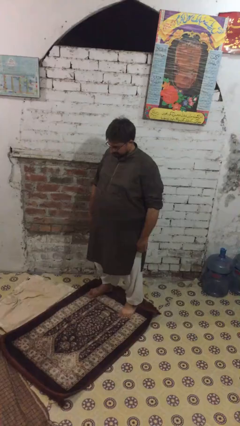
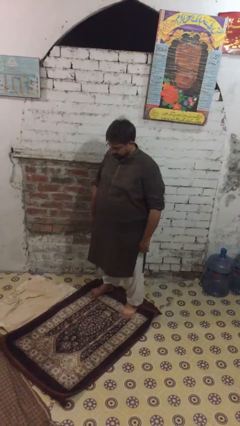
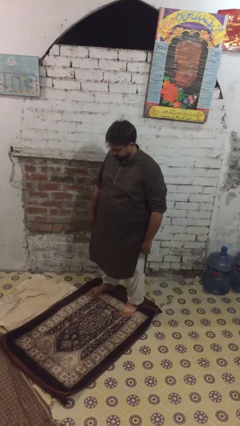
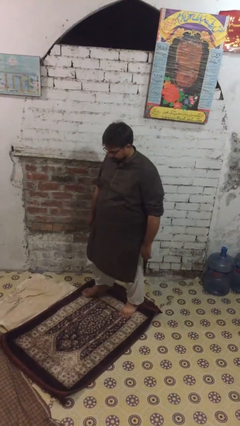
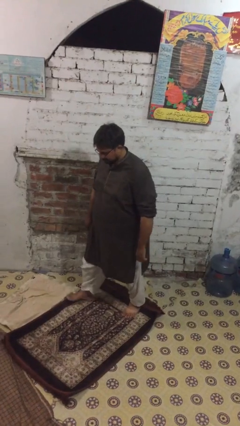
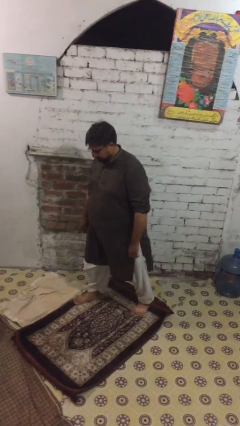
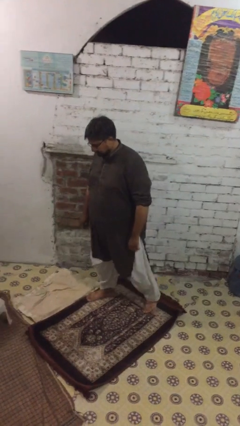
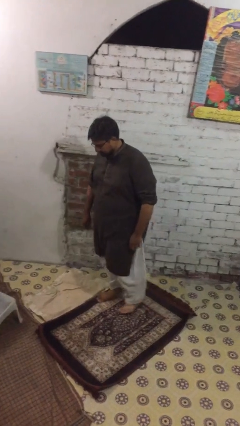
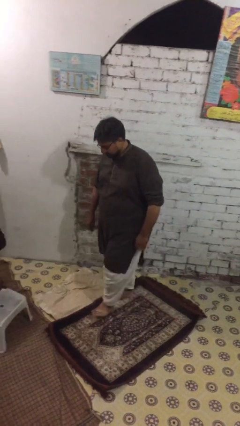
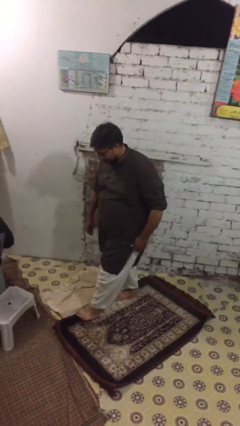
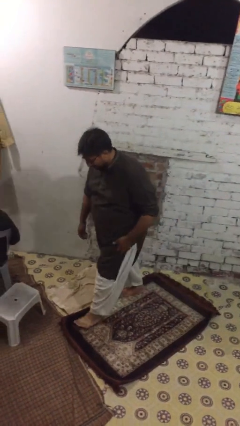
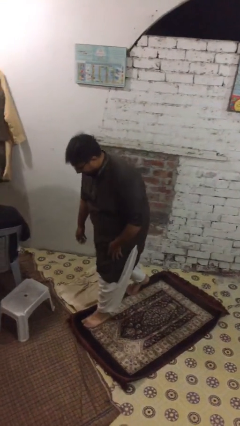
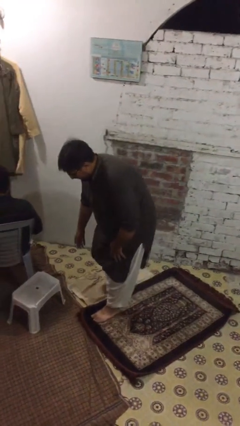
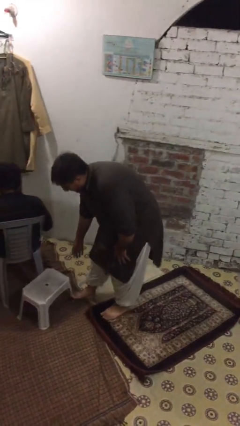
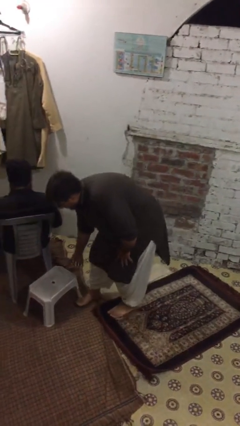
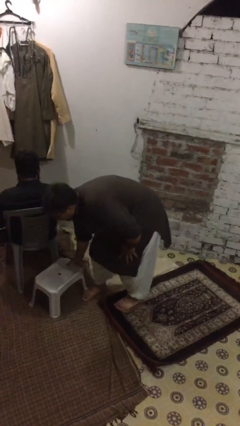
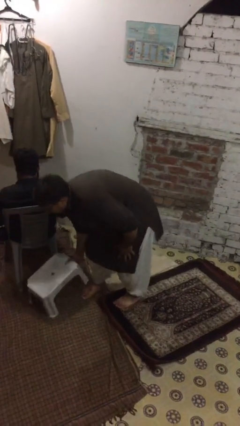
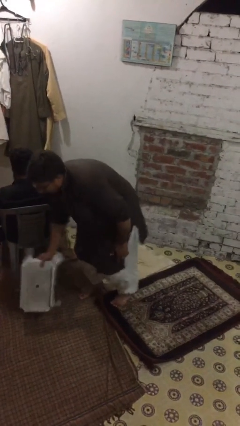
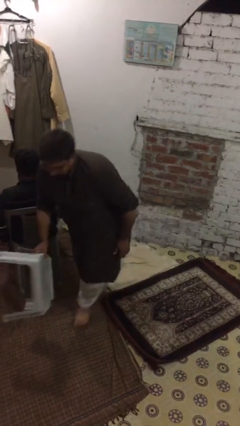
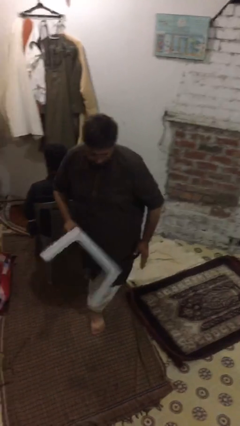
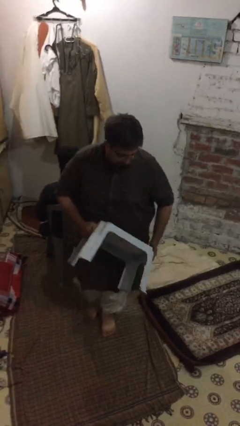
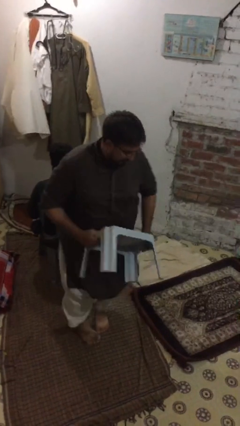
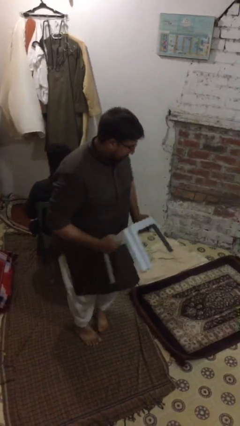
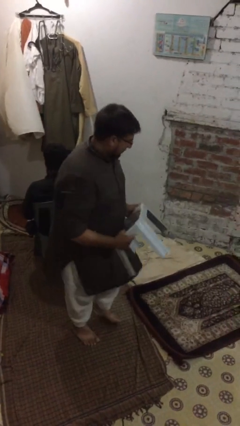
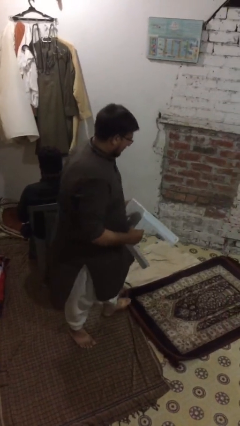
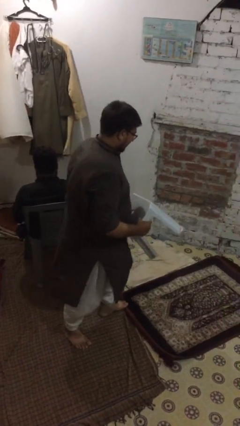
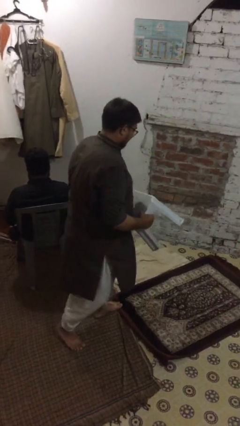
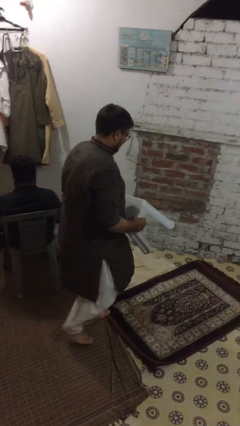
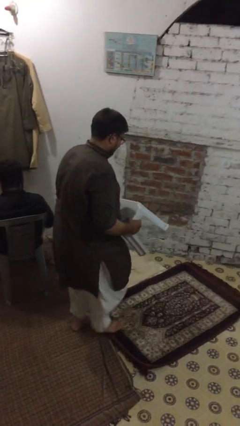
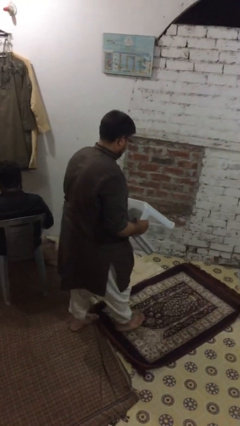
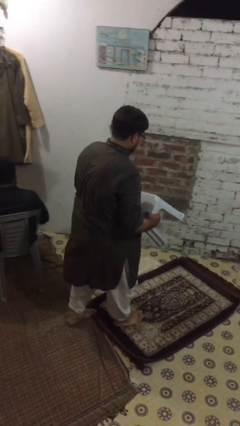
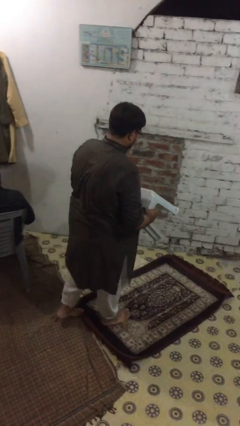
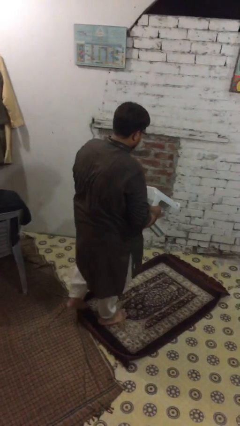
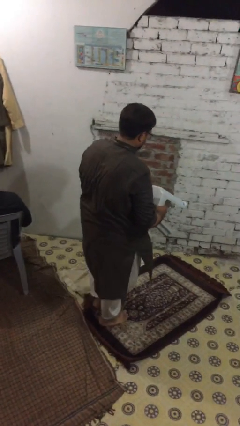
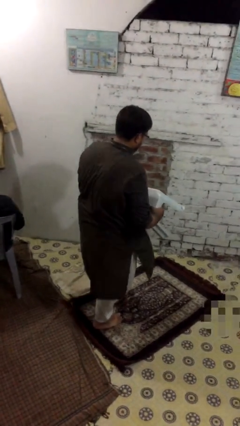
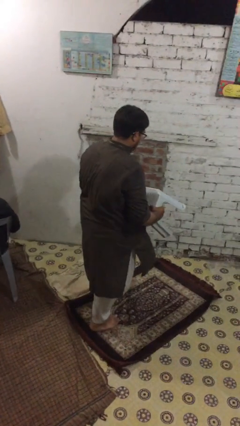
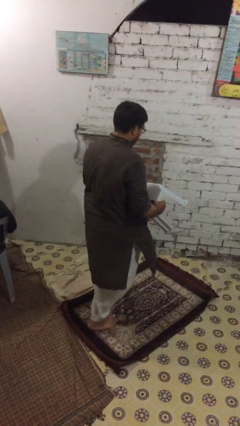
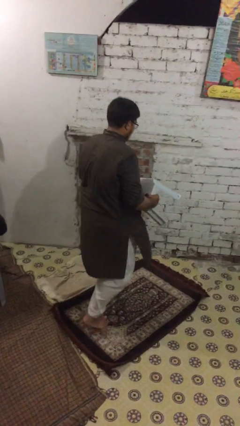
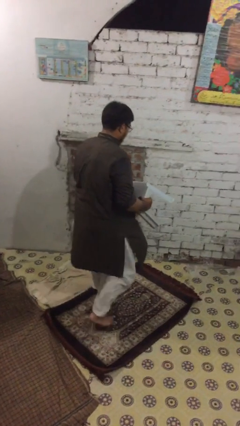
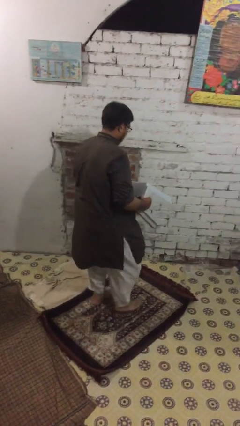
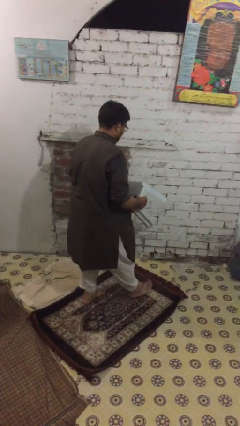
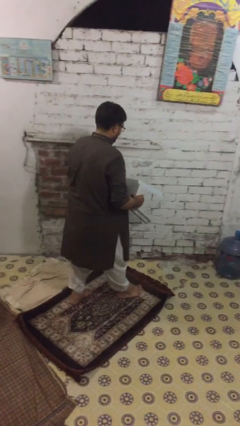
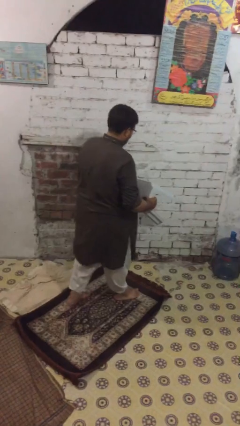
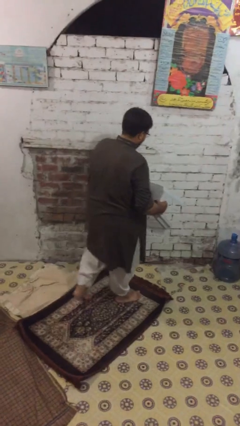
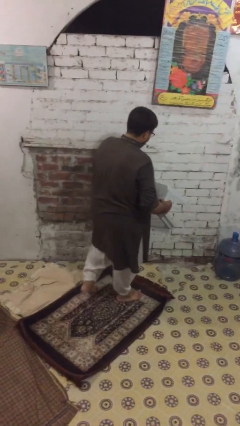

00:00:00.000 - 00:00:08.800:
person steals object from person

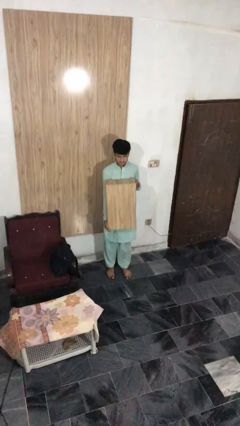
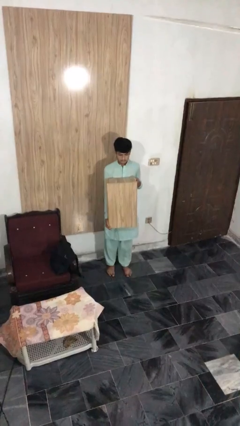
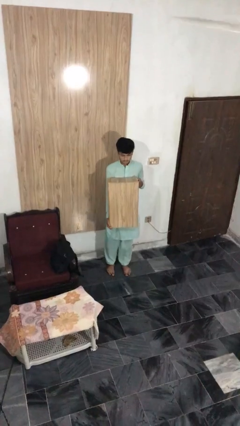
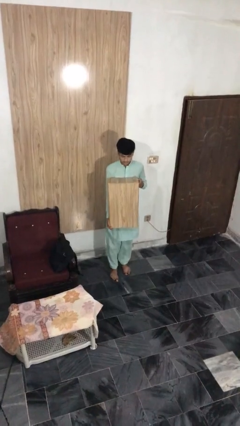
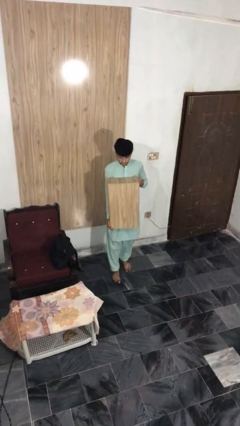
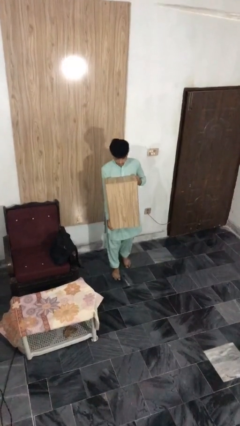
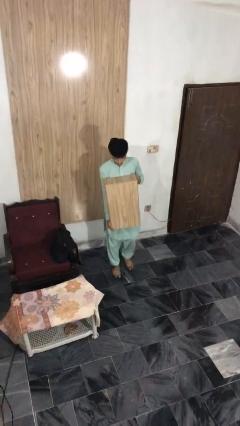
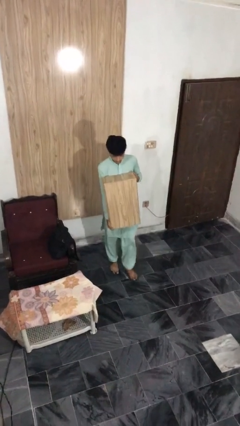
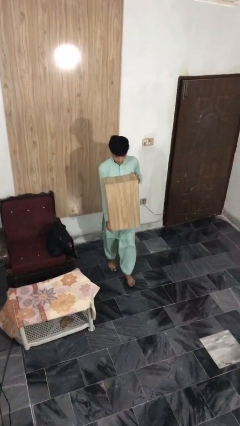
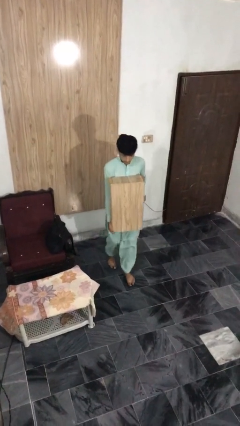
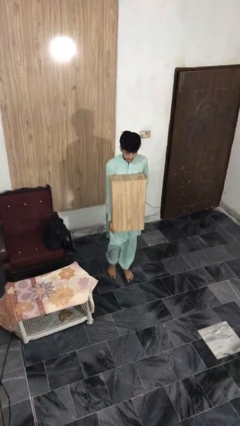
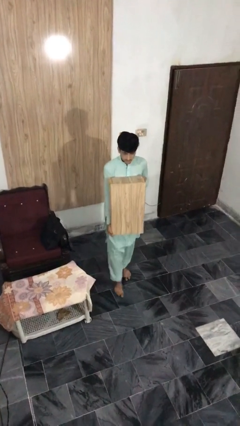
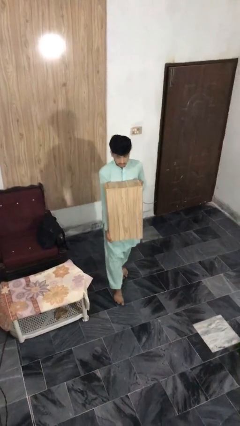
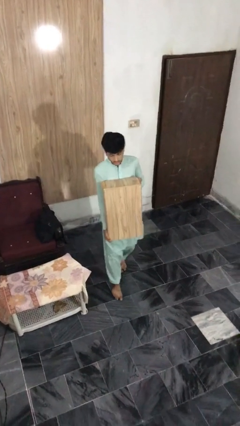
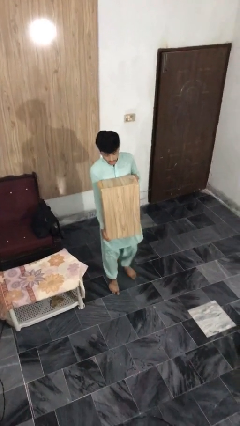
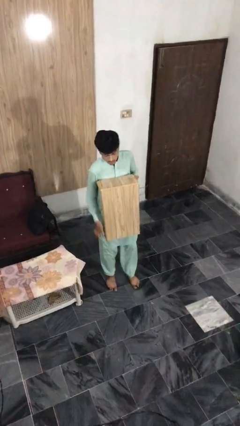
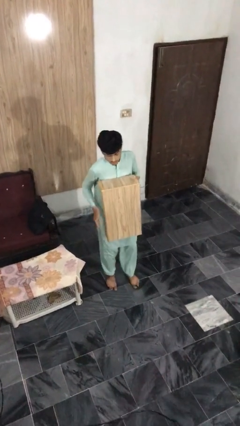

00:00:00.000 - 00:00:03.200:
person carries heavy object

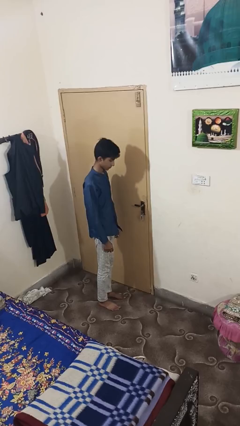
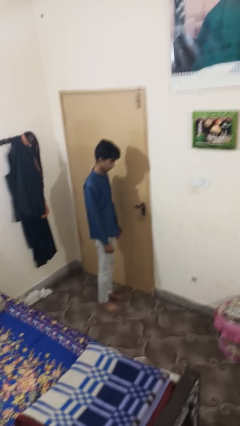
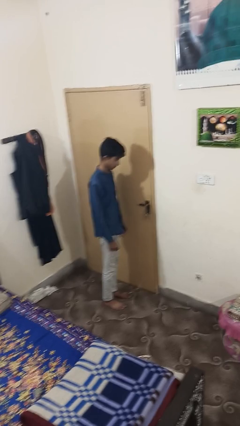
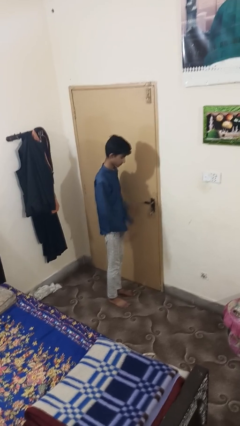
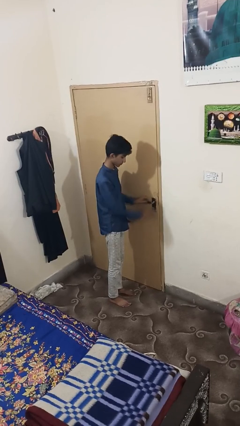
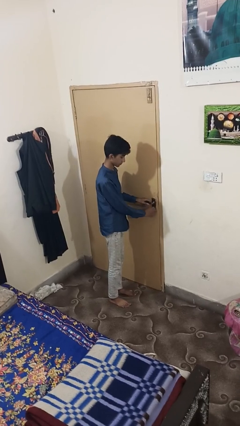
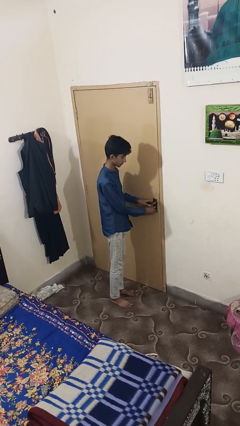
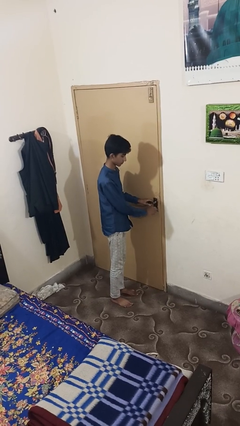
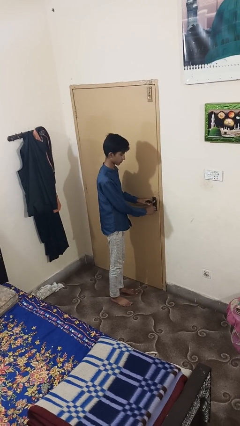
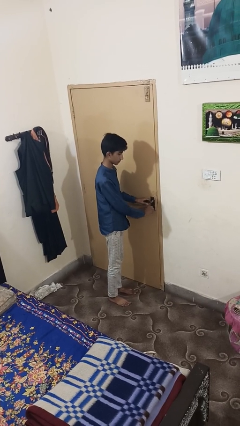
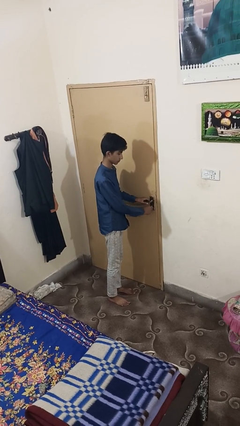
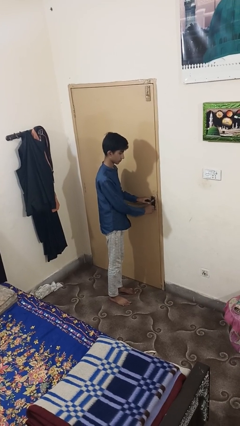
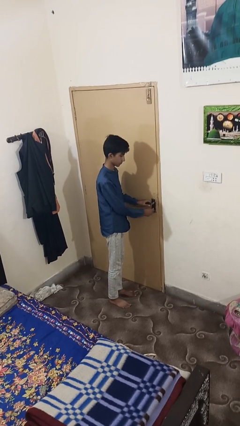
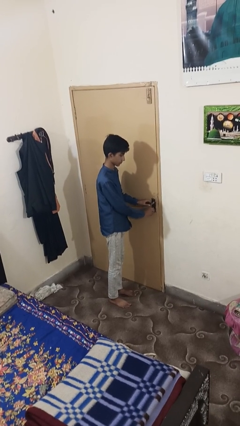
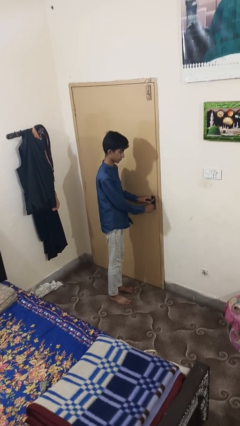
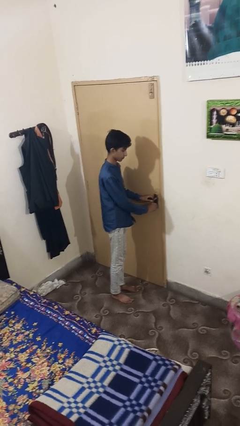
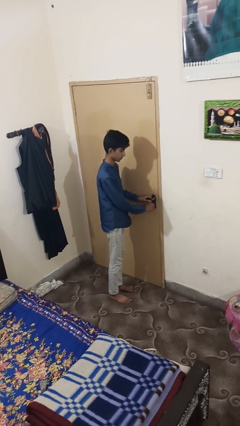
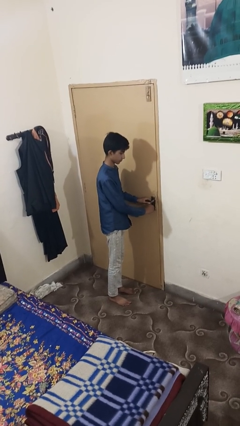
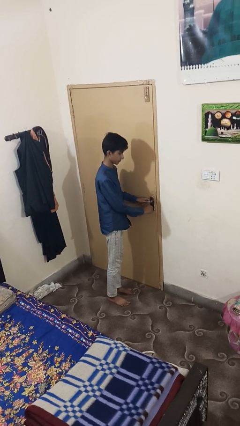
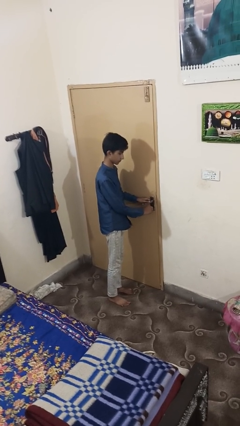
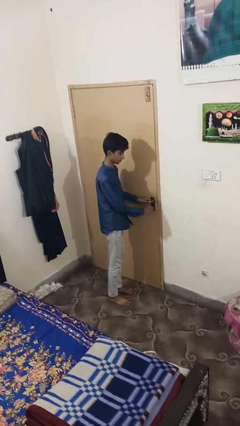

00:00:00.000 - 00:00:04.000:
person unlocks door with keys

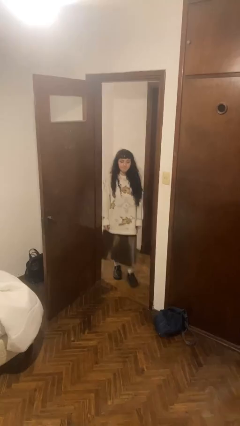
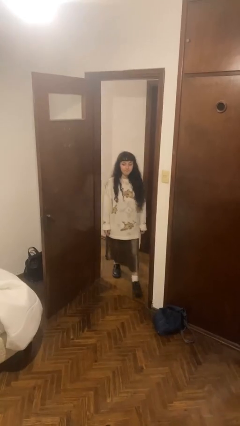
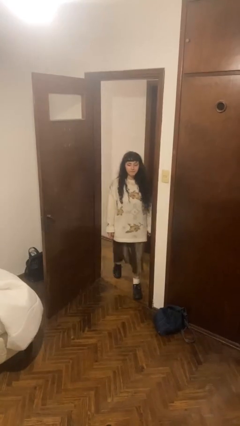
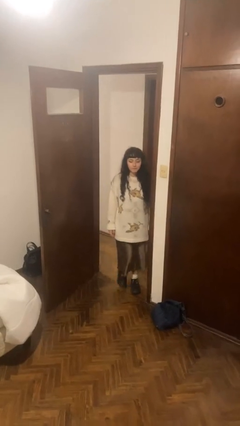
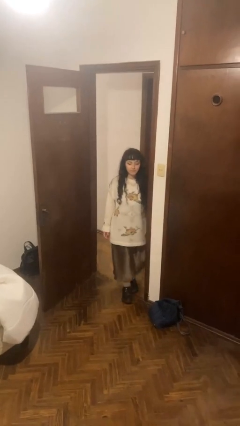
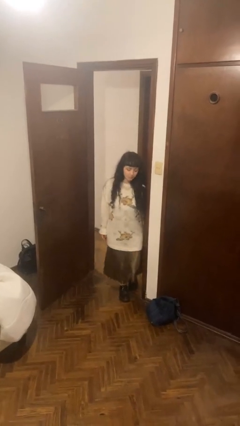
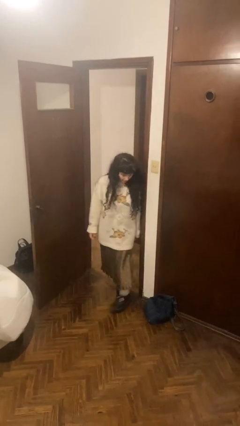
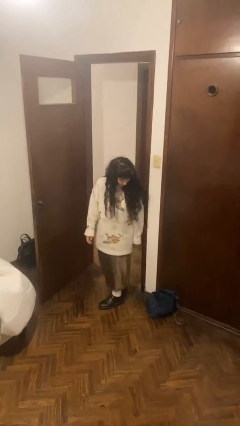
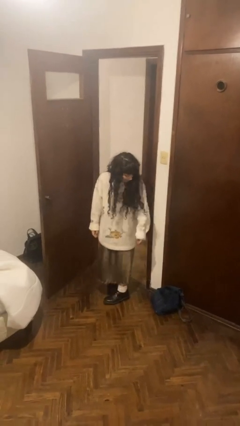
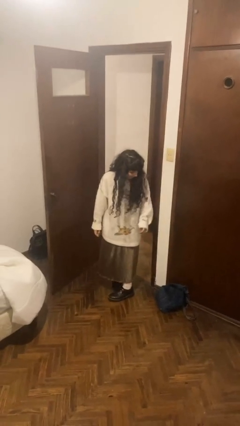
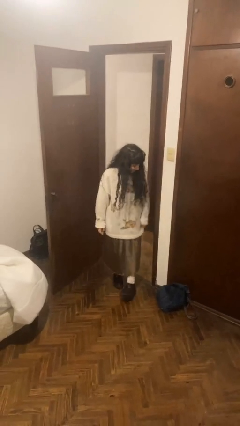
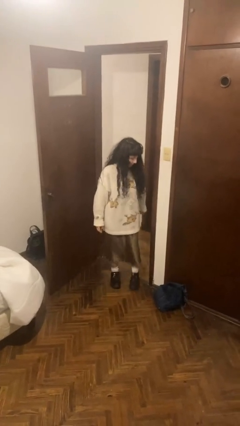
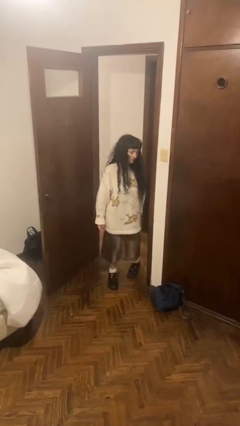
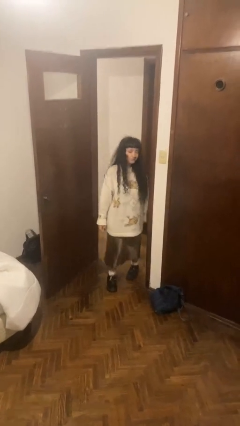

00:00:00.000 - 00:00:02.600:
person bumps into wall
